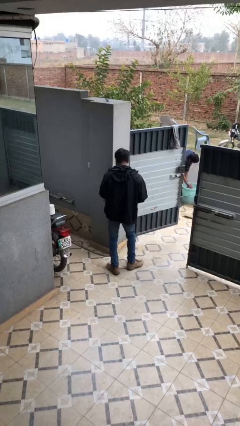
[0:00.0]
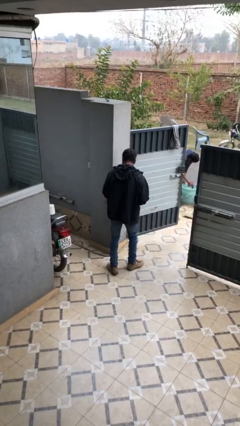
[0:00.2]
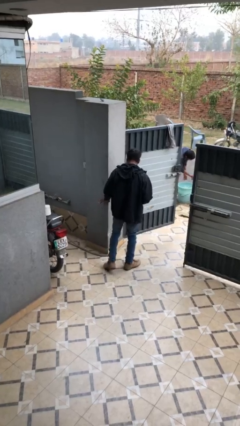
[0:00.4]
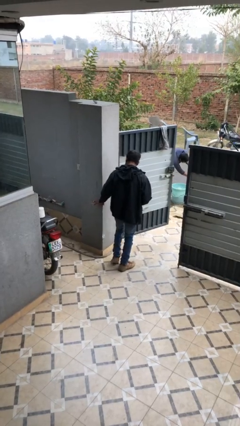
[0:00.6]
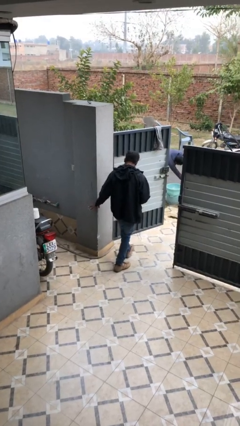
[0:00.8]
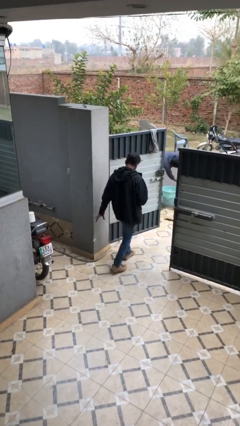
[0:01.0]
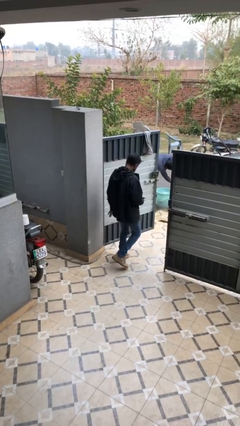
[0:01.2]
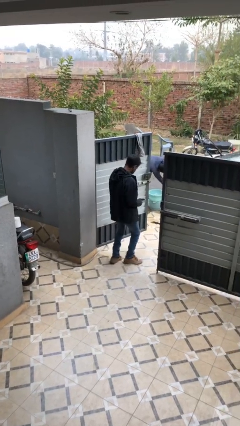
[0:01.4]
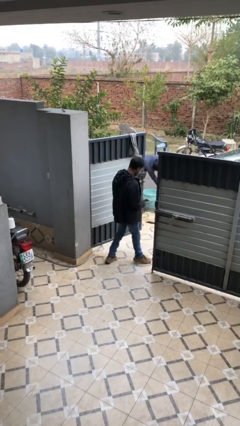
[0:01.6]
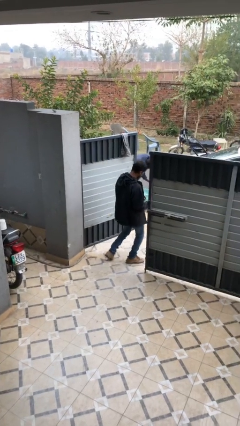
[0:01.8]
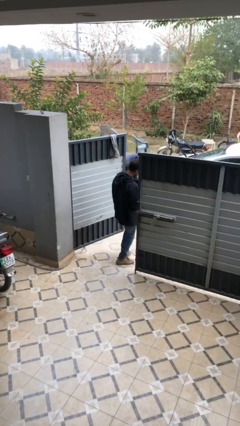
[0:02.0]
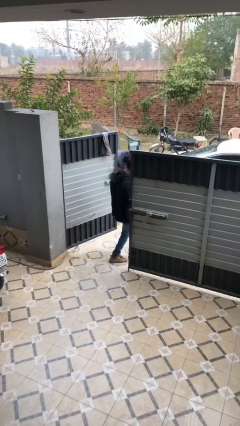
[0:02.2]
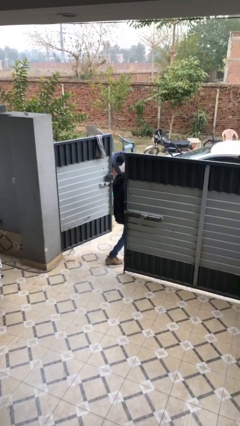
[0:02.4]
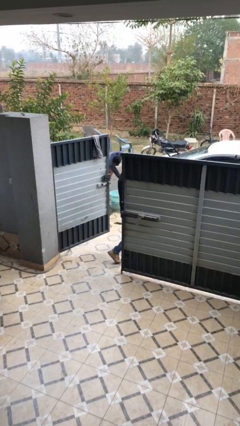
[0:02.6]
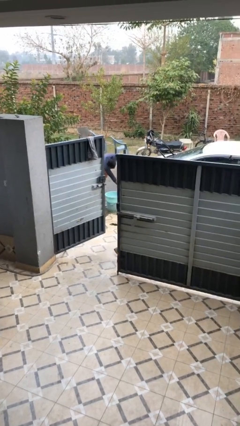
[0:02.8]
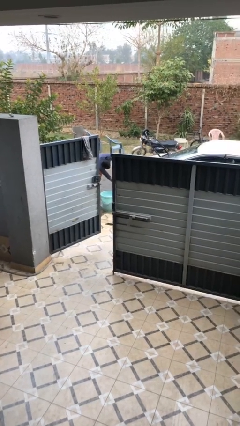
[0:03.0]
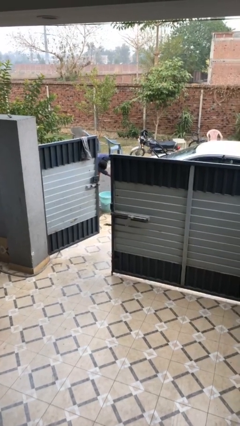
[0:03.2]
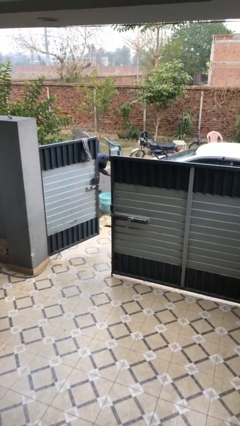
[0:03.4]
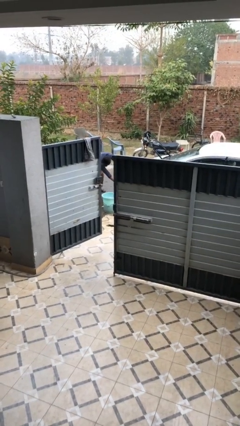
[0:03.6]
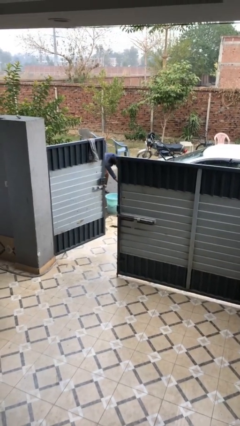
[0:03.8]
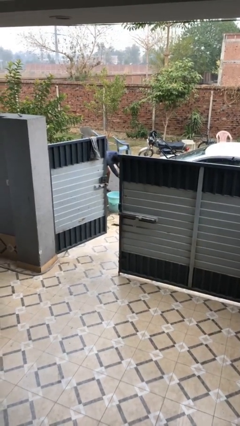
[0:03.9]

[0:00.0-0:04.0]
person exits scene through structure

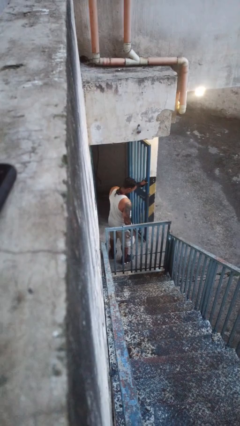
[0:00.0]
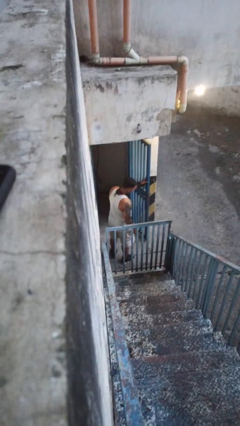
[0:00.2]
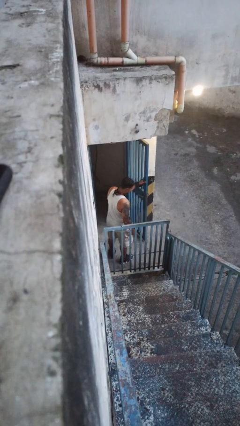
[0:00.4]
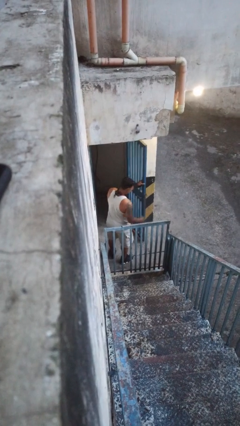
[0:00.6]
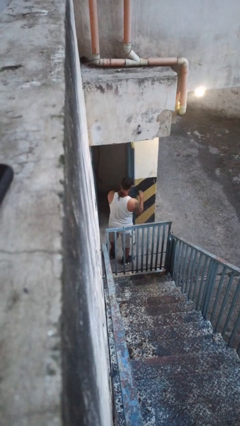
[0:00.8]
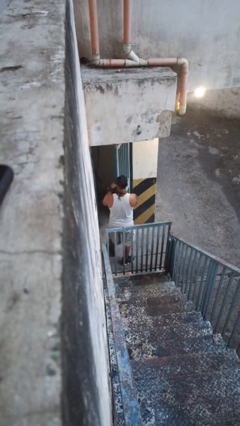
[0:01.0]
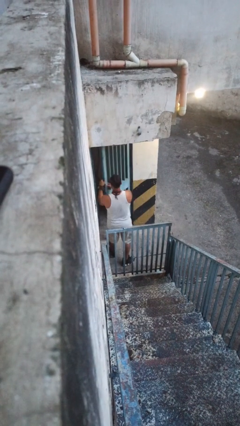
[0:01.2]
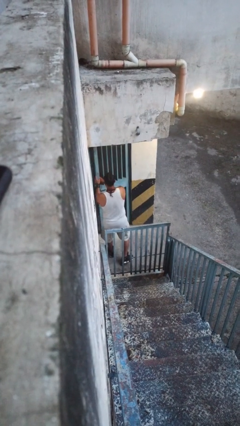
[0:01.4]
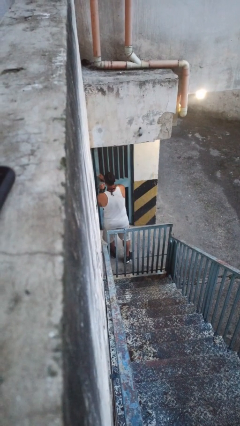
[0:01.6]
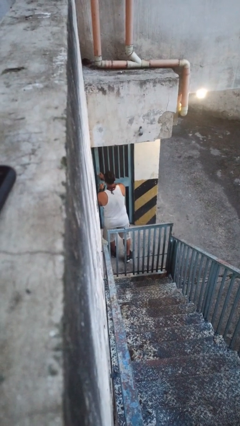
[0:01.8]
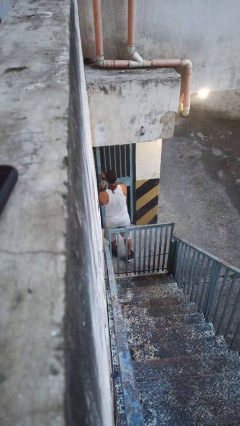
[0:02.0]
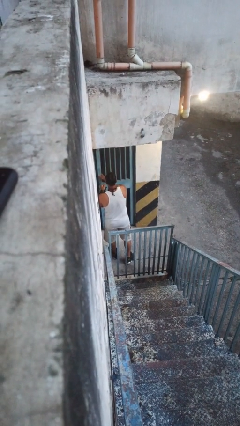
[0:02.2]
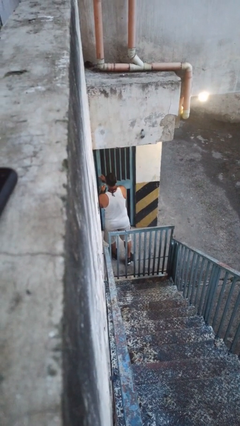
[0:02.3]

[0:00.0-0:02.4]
person closes facility door

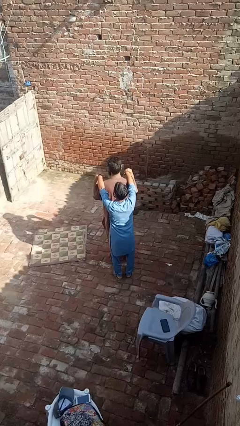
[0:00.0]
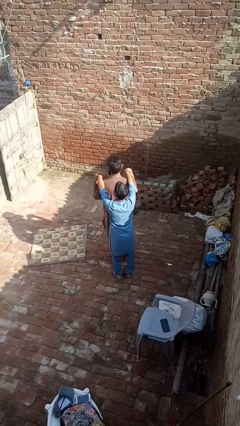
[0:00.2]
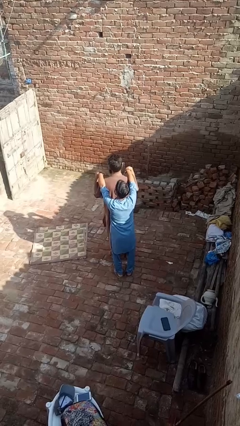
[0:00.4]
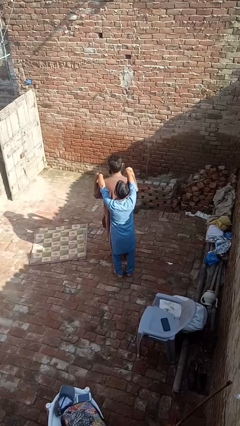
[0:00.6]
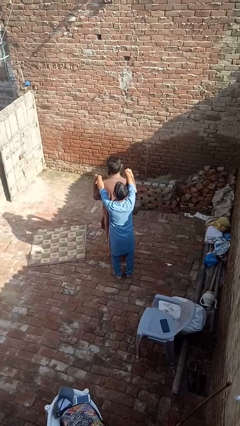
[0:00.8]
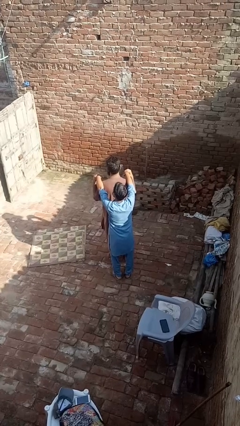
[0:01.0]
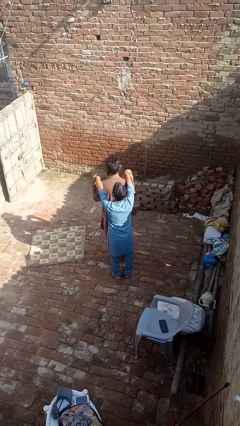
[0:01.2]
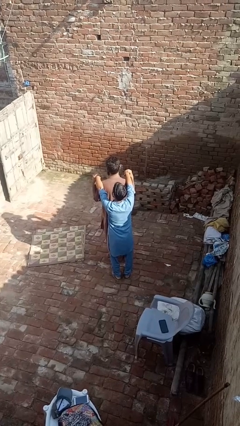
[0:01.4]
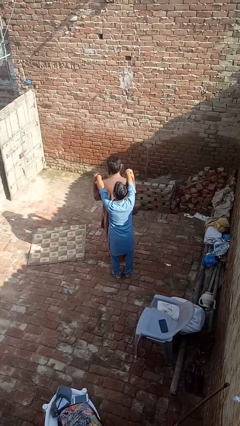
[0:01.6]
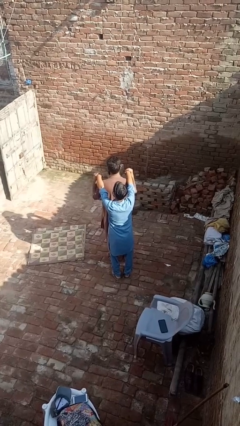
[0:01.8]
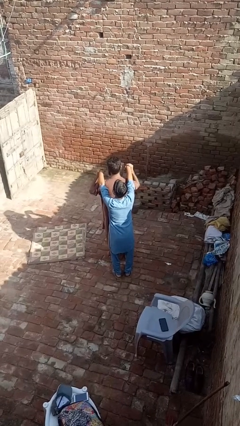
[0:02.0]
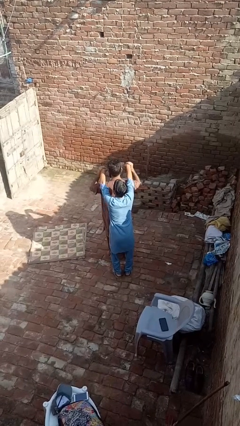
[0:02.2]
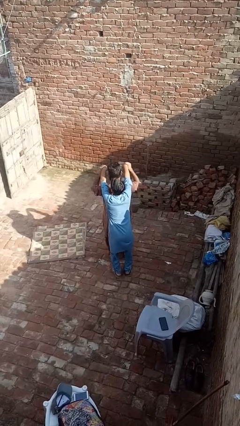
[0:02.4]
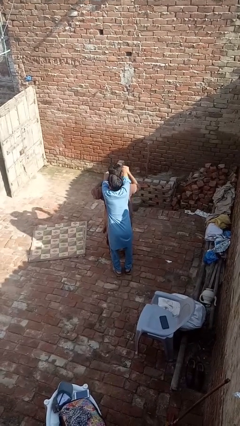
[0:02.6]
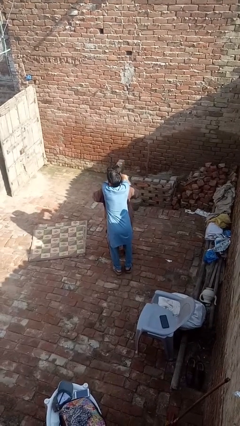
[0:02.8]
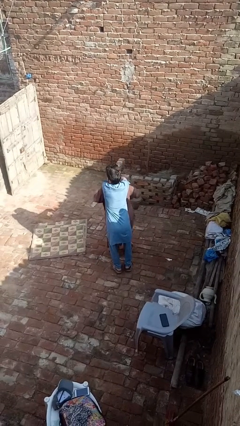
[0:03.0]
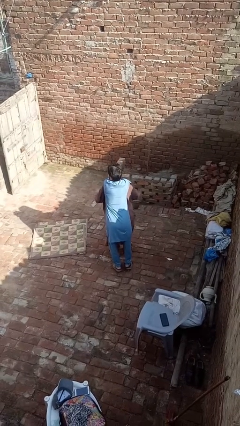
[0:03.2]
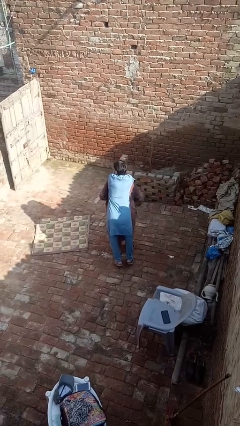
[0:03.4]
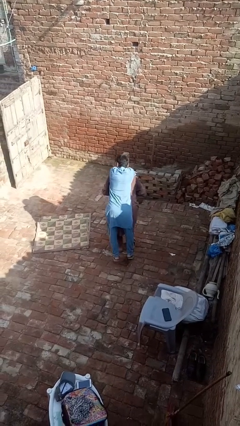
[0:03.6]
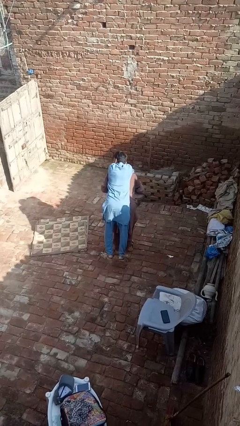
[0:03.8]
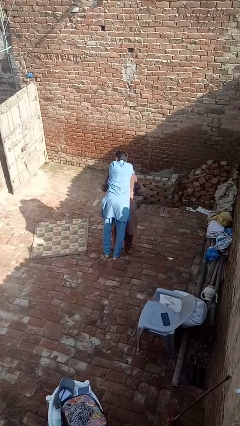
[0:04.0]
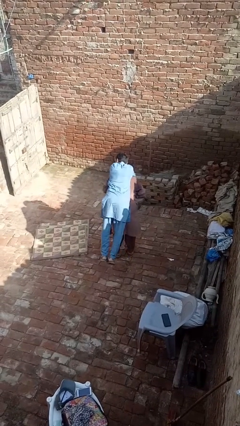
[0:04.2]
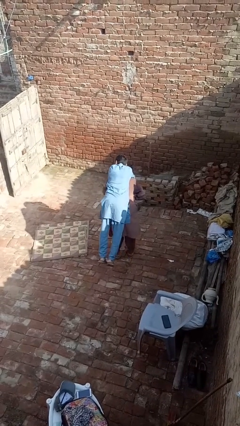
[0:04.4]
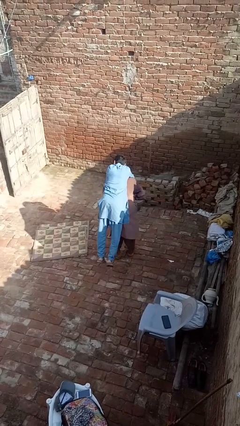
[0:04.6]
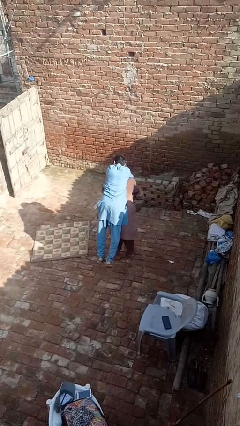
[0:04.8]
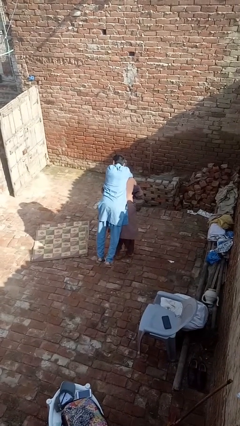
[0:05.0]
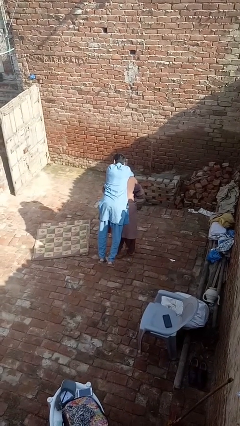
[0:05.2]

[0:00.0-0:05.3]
person carries person over shoulder

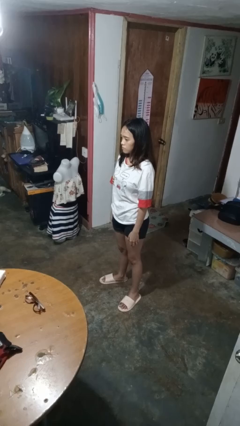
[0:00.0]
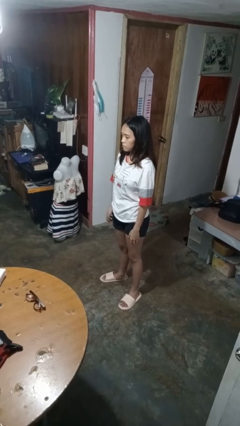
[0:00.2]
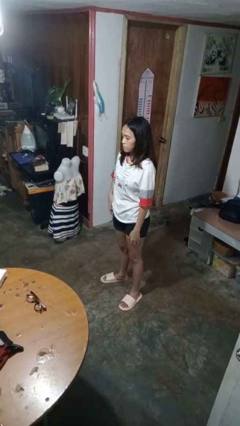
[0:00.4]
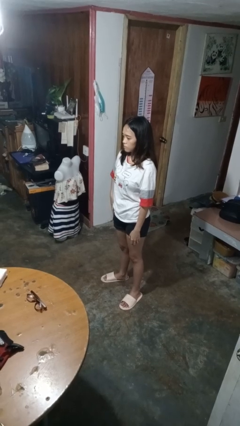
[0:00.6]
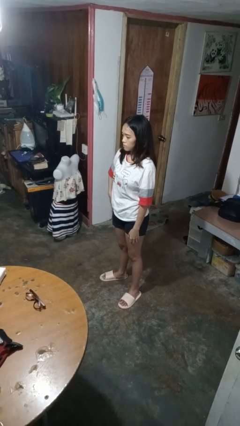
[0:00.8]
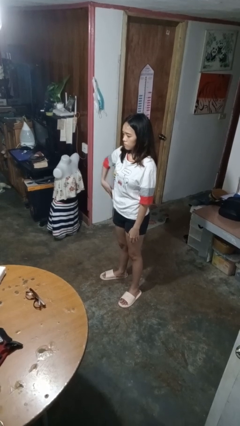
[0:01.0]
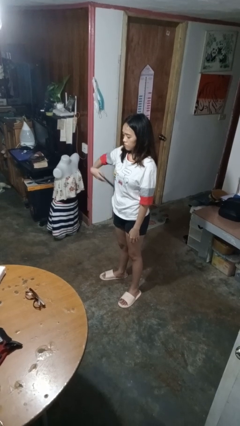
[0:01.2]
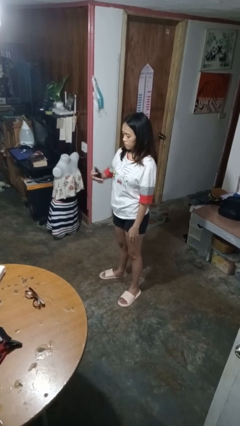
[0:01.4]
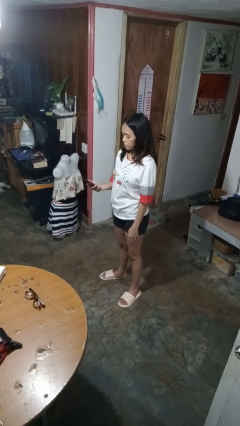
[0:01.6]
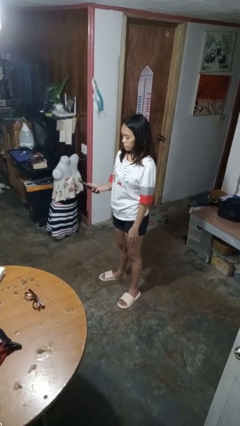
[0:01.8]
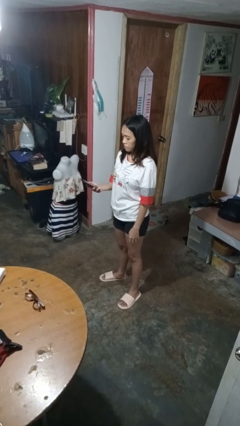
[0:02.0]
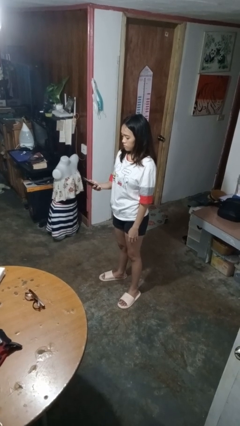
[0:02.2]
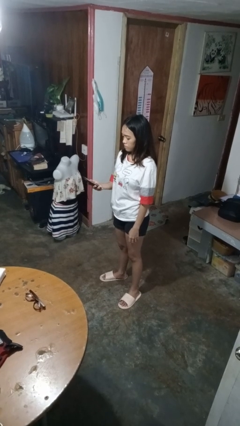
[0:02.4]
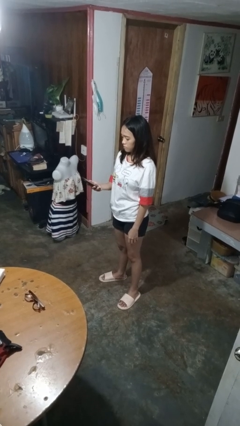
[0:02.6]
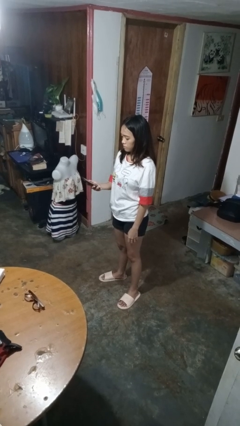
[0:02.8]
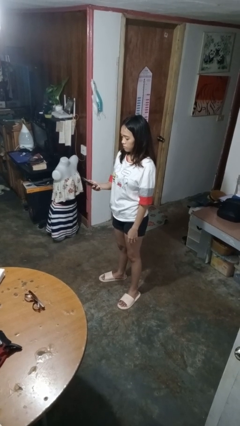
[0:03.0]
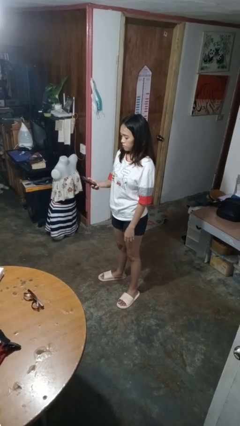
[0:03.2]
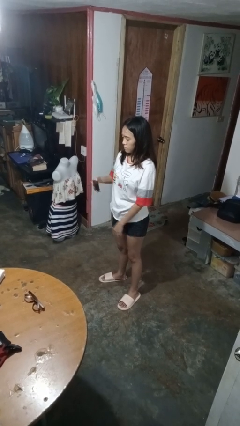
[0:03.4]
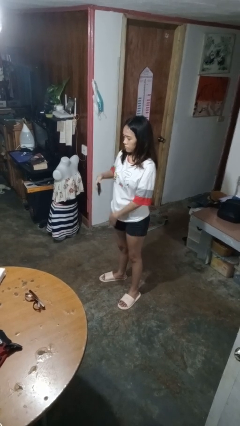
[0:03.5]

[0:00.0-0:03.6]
person takes phone from pocket

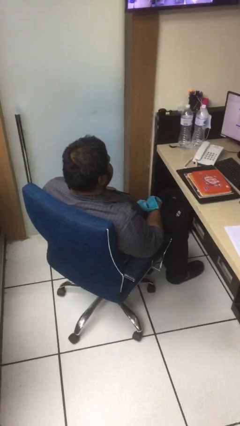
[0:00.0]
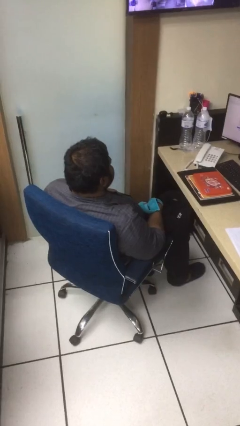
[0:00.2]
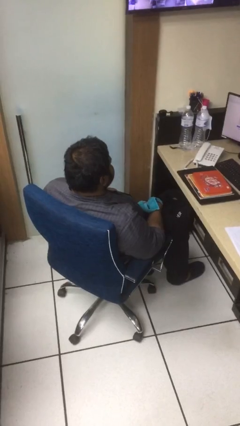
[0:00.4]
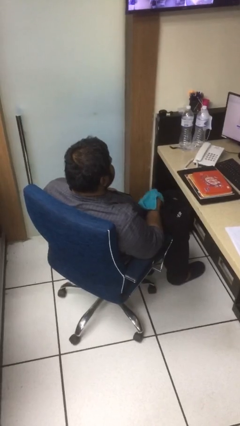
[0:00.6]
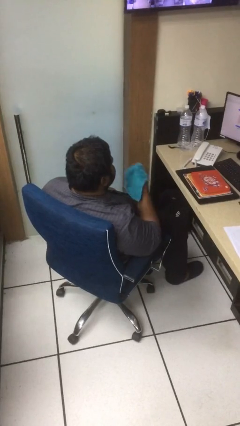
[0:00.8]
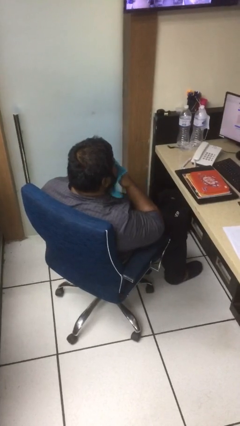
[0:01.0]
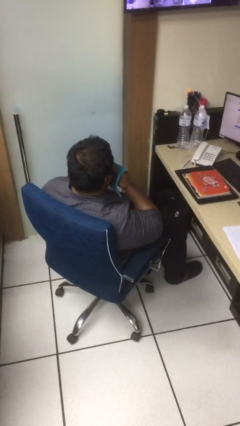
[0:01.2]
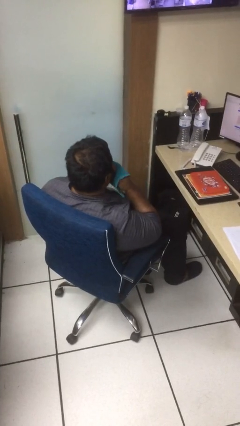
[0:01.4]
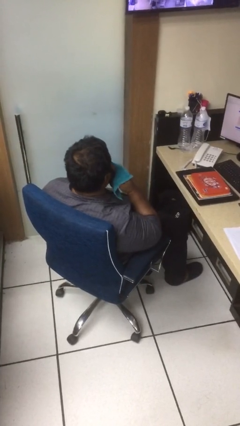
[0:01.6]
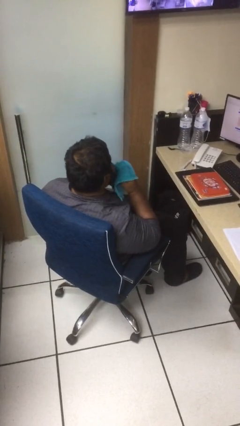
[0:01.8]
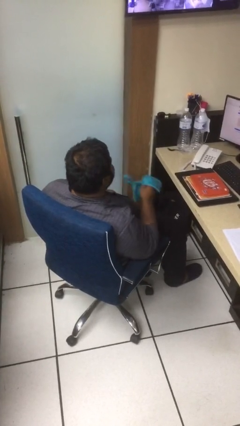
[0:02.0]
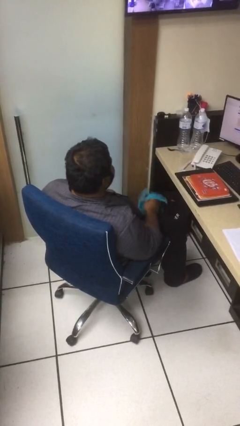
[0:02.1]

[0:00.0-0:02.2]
person wipes mouth with napkin
